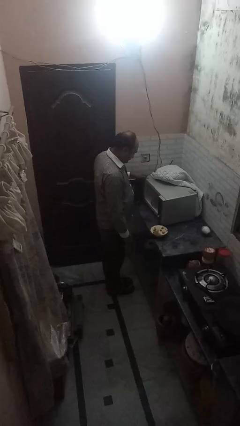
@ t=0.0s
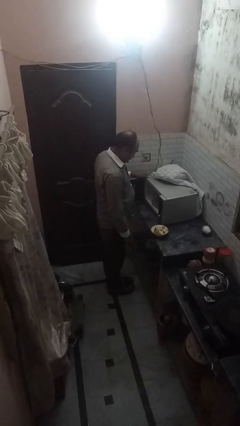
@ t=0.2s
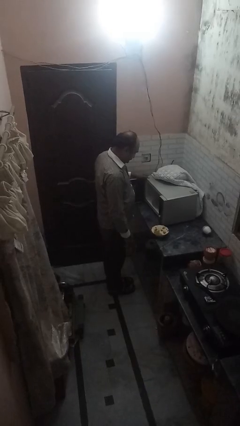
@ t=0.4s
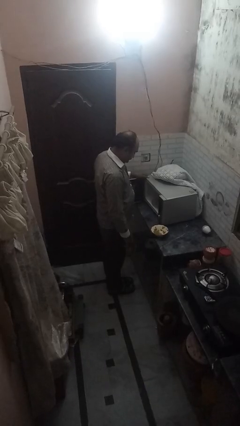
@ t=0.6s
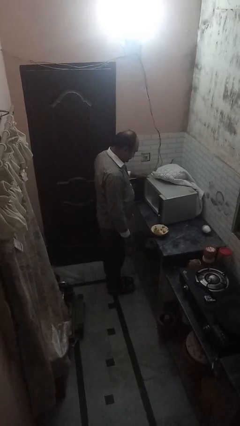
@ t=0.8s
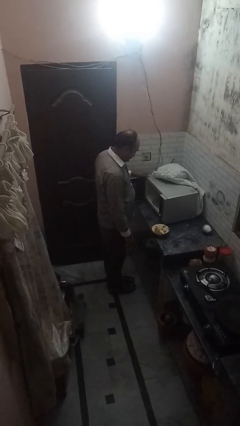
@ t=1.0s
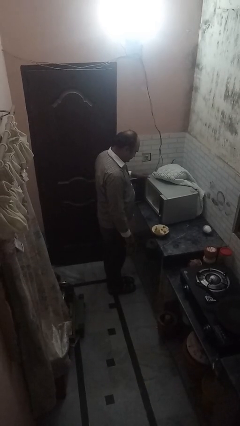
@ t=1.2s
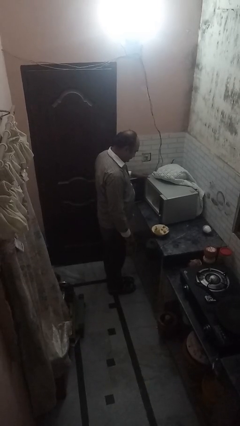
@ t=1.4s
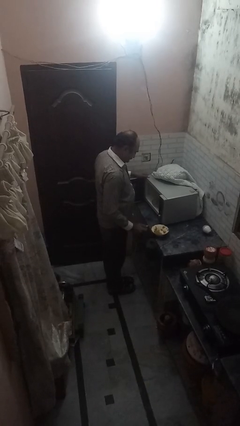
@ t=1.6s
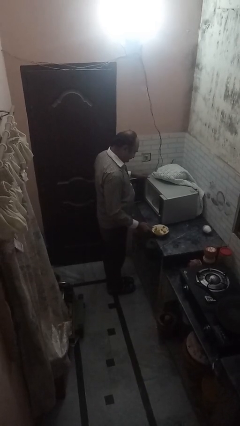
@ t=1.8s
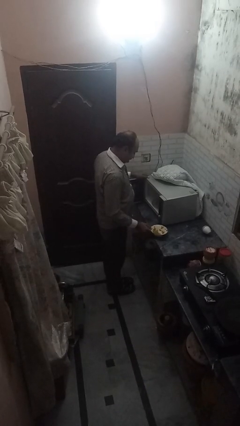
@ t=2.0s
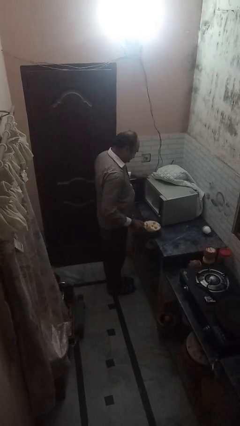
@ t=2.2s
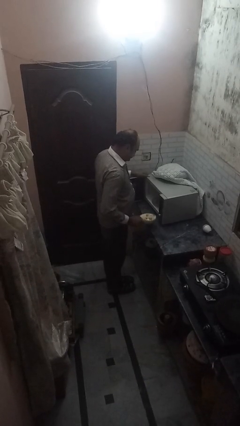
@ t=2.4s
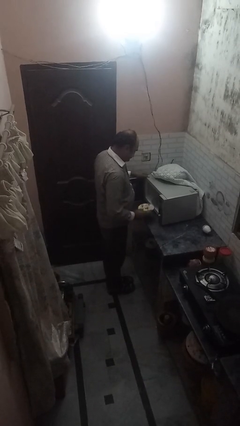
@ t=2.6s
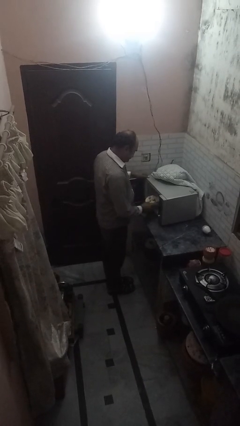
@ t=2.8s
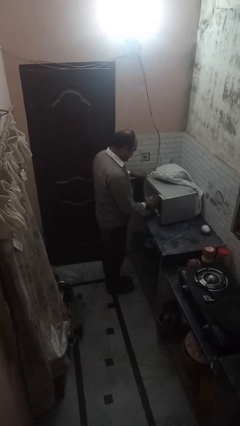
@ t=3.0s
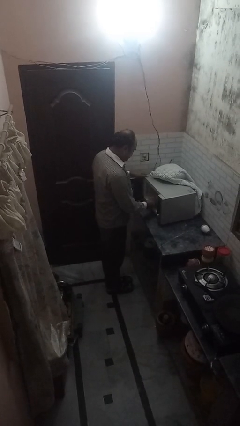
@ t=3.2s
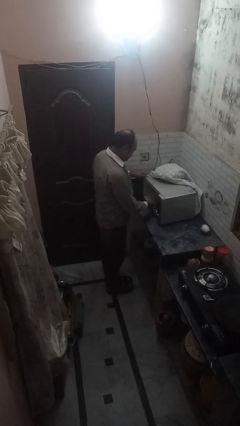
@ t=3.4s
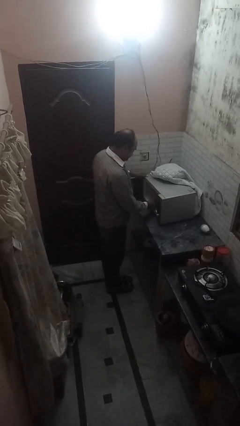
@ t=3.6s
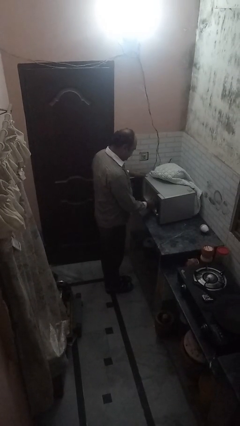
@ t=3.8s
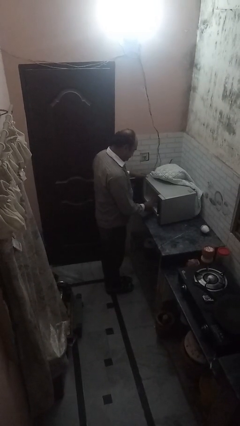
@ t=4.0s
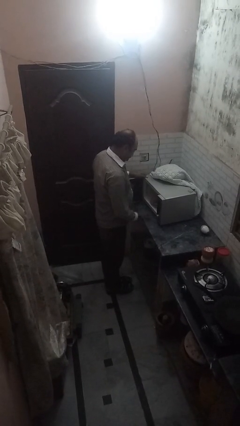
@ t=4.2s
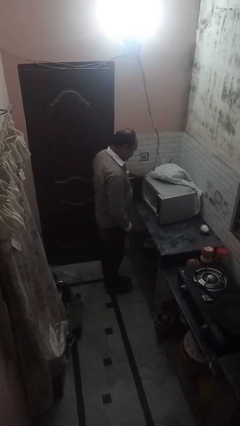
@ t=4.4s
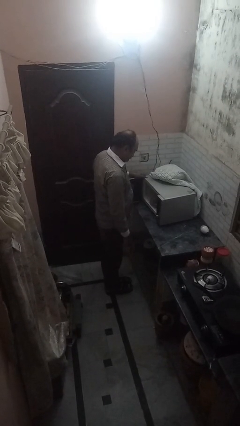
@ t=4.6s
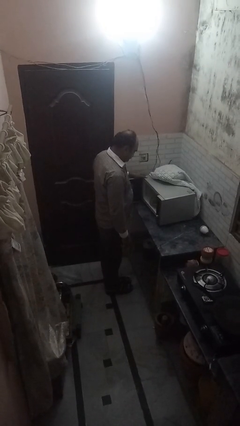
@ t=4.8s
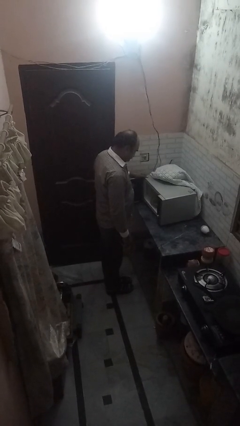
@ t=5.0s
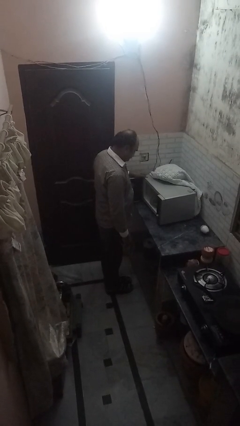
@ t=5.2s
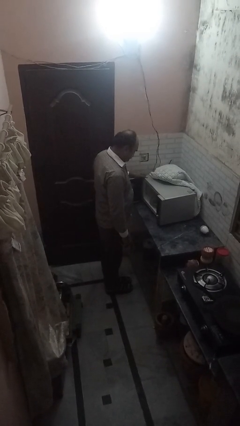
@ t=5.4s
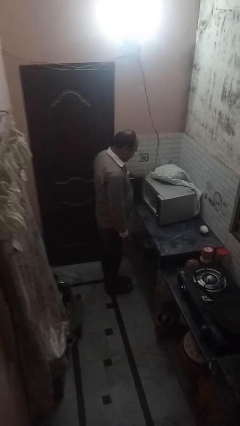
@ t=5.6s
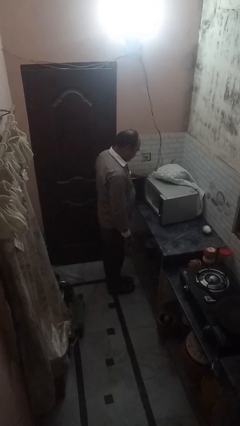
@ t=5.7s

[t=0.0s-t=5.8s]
person puts object into microwave

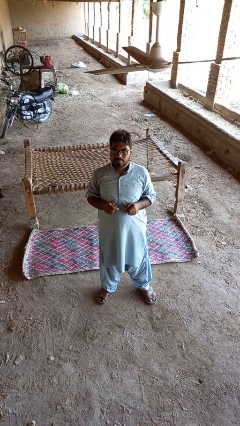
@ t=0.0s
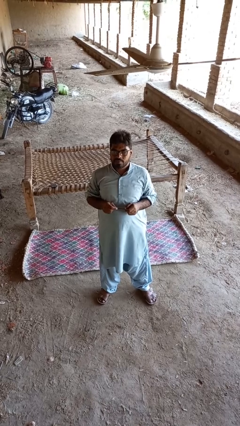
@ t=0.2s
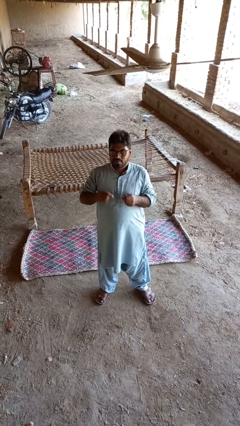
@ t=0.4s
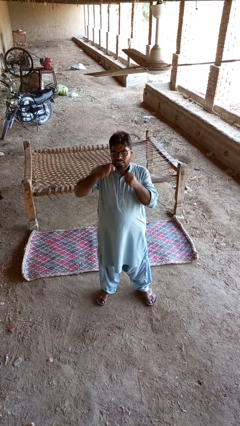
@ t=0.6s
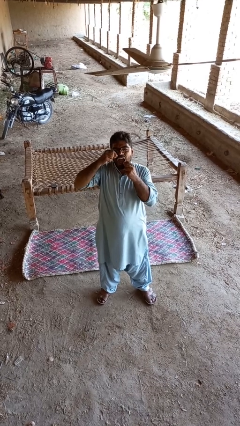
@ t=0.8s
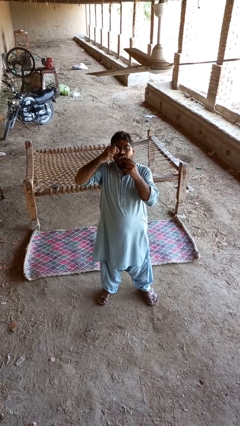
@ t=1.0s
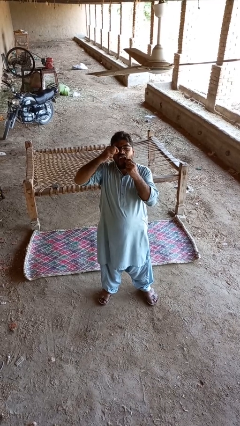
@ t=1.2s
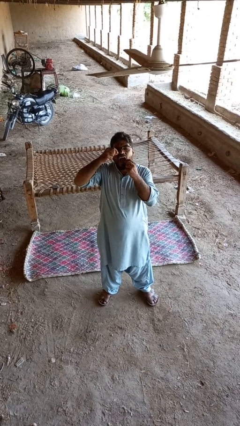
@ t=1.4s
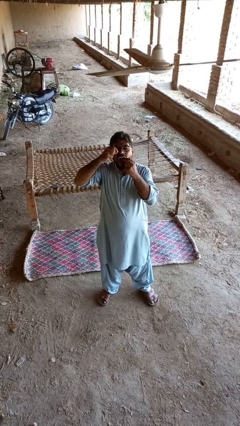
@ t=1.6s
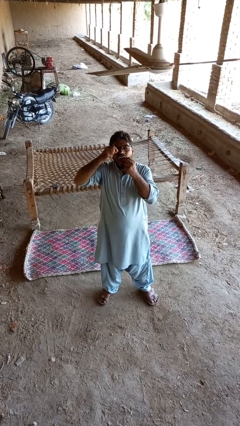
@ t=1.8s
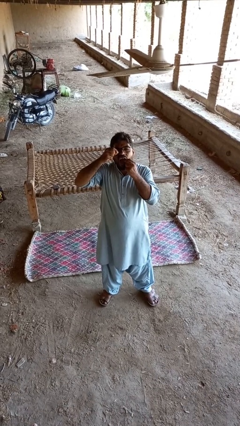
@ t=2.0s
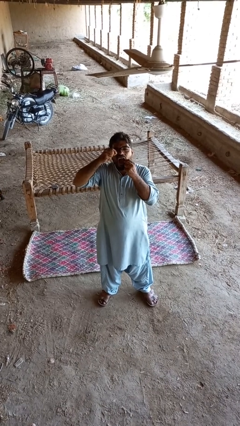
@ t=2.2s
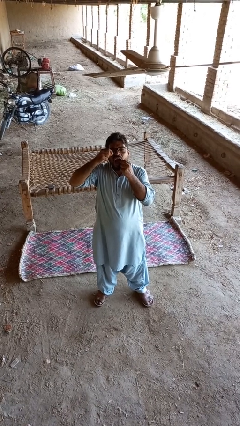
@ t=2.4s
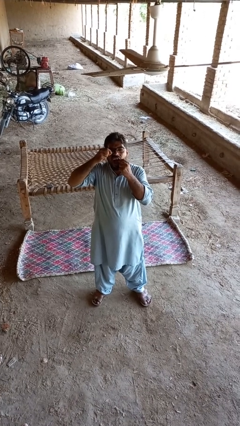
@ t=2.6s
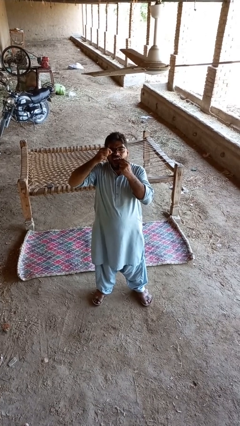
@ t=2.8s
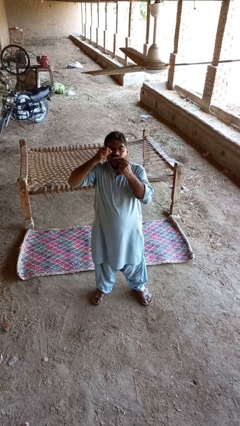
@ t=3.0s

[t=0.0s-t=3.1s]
person flosses

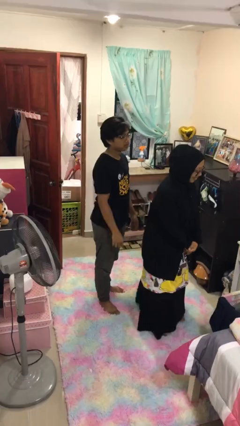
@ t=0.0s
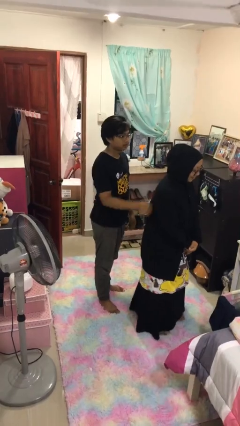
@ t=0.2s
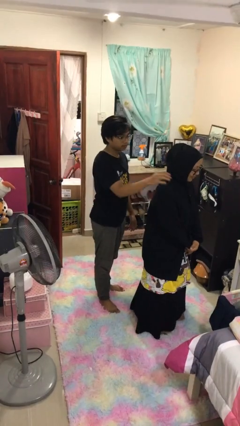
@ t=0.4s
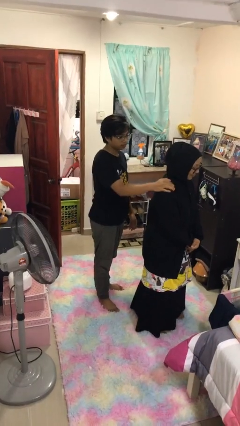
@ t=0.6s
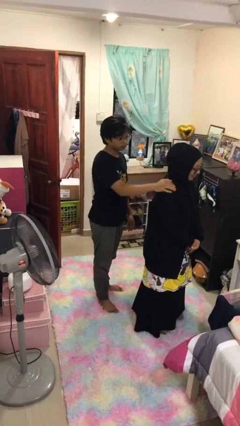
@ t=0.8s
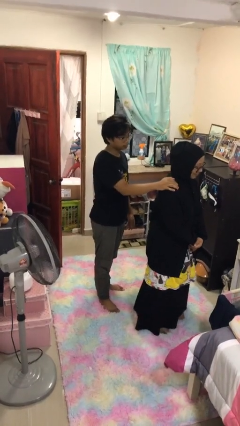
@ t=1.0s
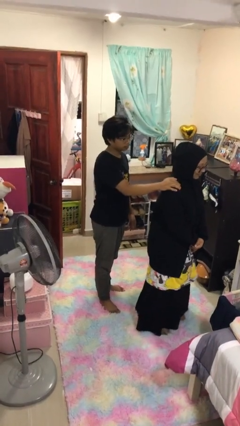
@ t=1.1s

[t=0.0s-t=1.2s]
person grabs person by shoulder

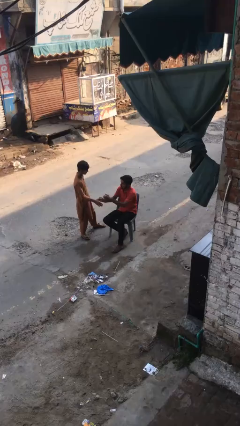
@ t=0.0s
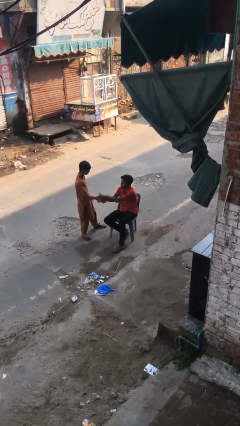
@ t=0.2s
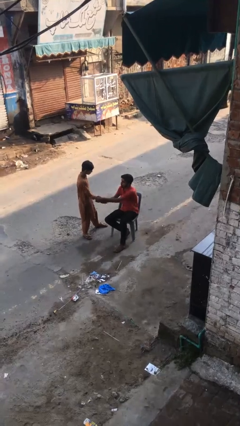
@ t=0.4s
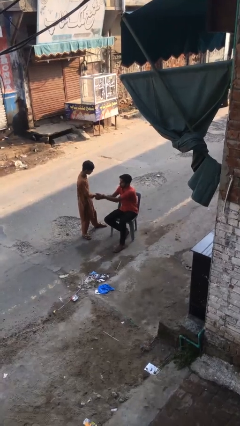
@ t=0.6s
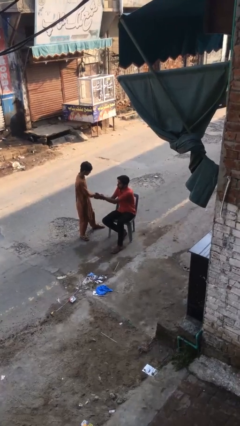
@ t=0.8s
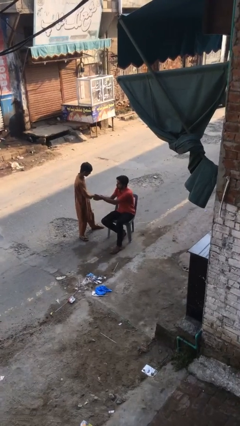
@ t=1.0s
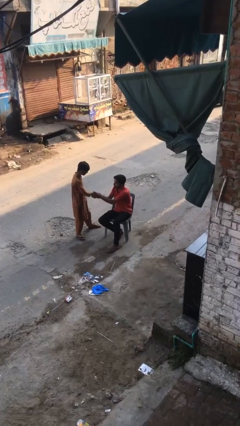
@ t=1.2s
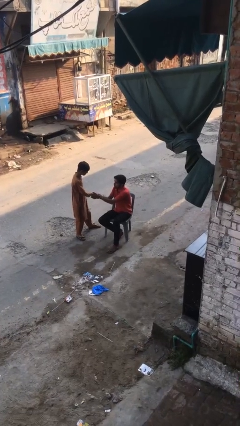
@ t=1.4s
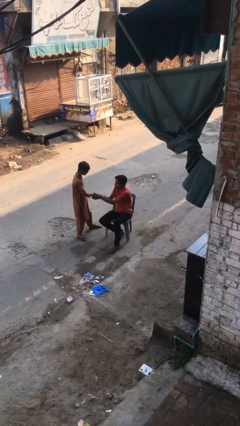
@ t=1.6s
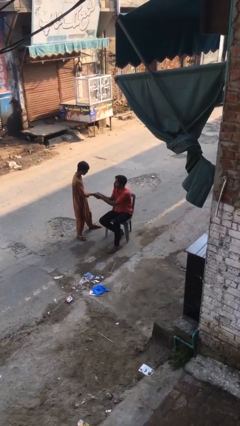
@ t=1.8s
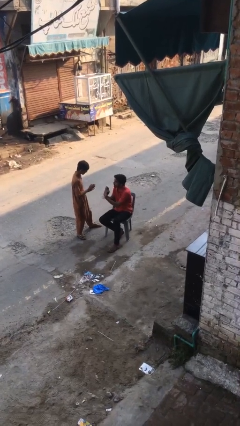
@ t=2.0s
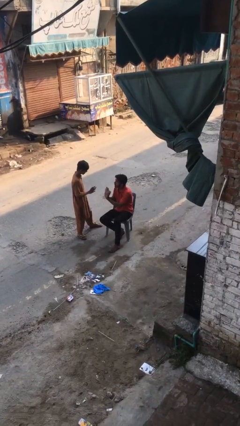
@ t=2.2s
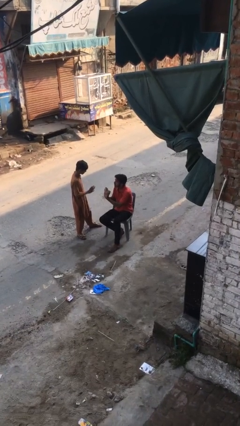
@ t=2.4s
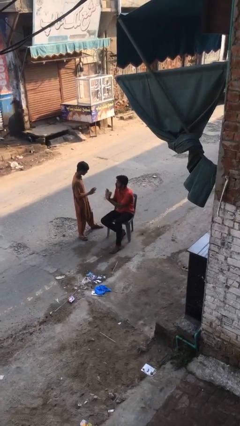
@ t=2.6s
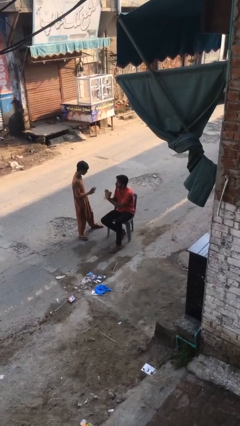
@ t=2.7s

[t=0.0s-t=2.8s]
person shakes hand

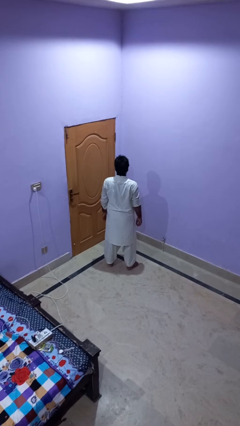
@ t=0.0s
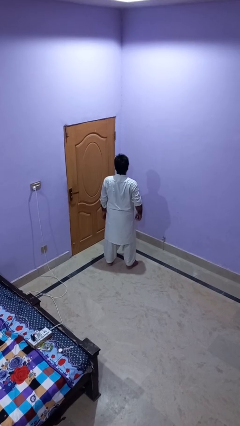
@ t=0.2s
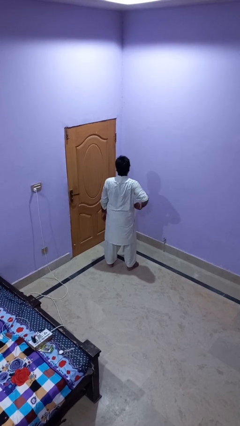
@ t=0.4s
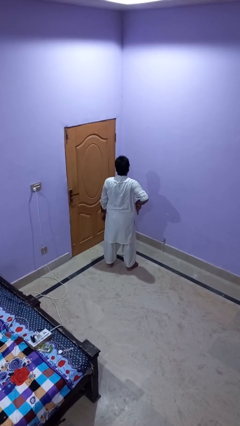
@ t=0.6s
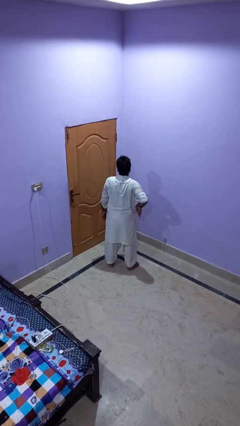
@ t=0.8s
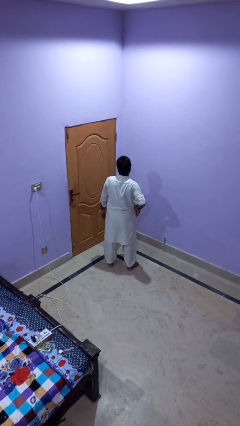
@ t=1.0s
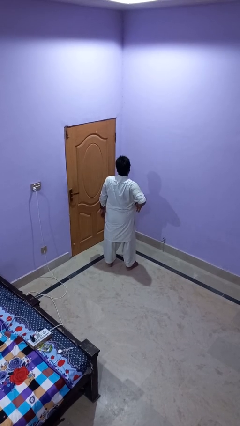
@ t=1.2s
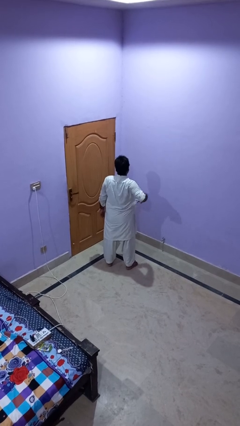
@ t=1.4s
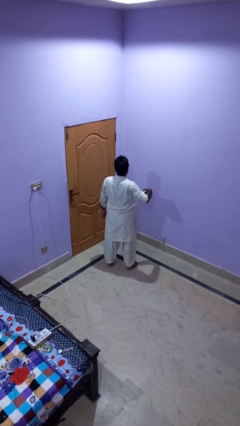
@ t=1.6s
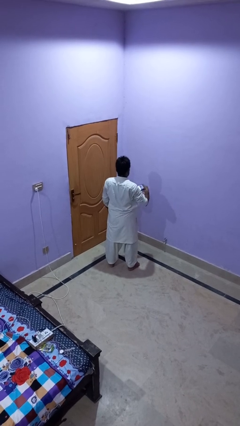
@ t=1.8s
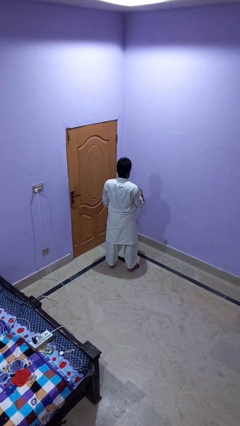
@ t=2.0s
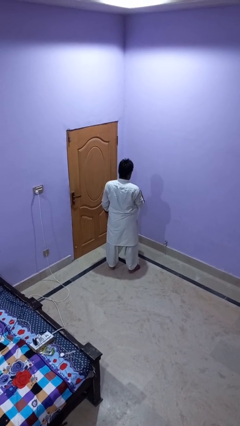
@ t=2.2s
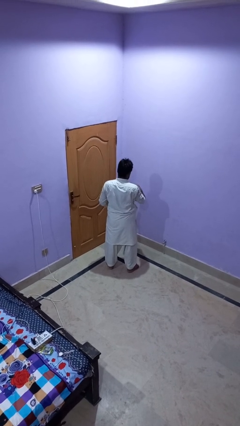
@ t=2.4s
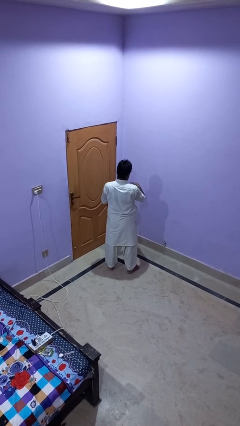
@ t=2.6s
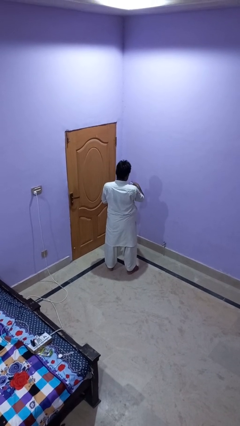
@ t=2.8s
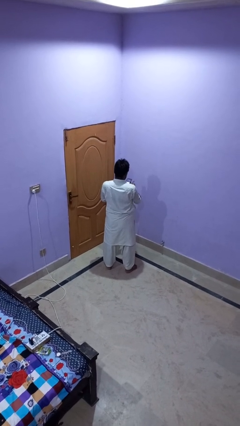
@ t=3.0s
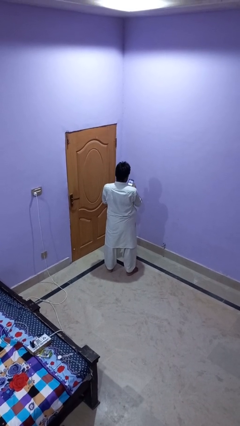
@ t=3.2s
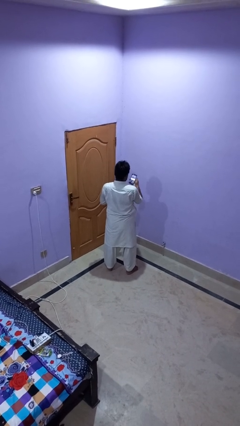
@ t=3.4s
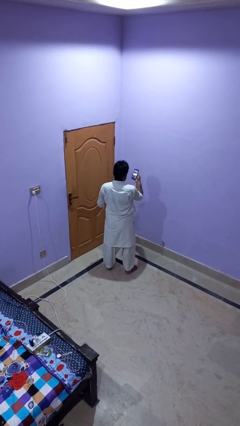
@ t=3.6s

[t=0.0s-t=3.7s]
person takes phone from pocket

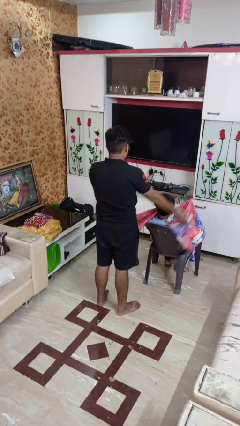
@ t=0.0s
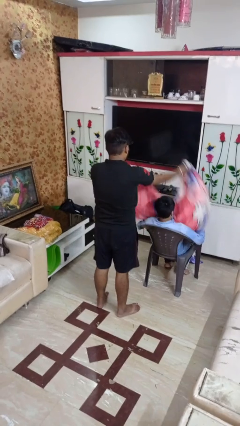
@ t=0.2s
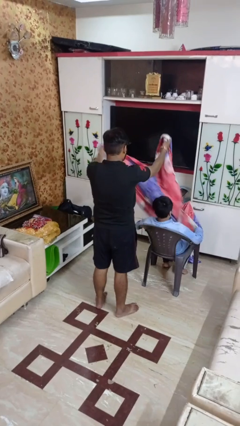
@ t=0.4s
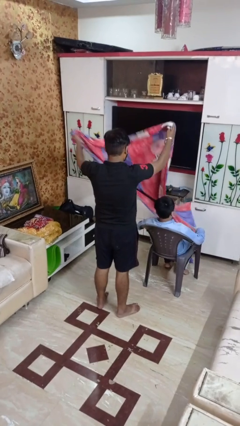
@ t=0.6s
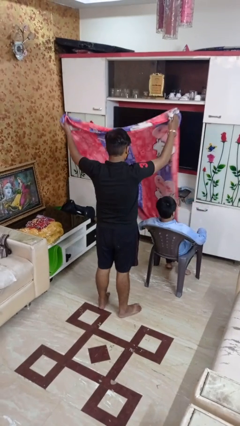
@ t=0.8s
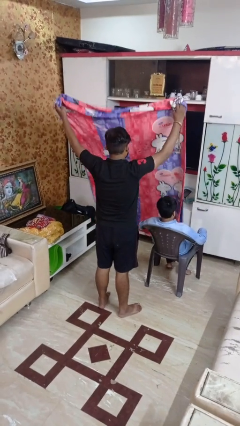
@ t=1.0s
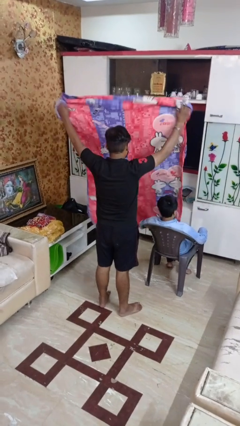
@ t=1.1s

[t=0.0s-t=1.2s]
person uncovers friend with blanket
